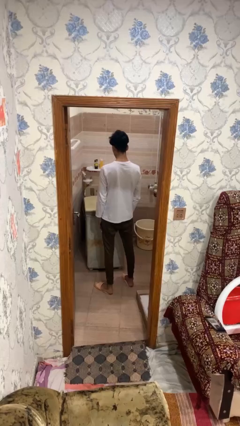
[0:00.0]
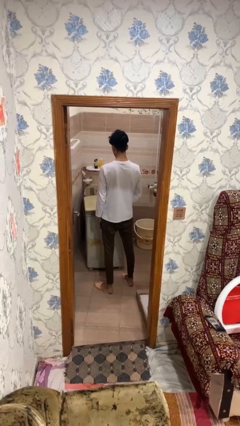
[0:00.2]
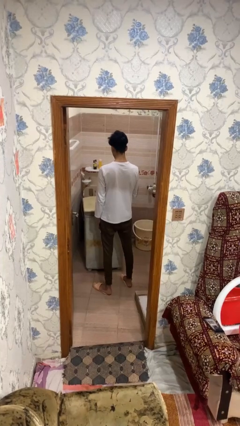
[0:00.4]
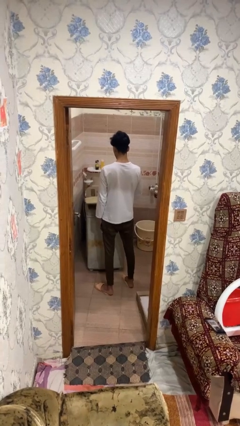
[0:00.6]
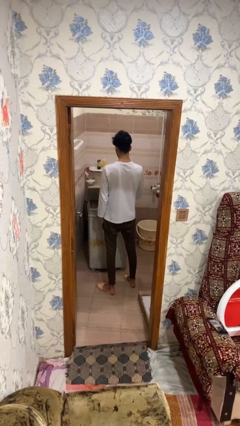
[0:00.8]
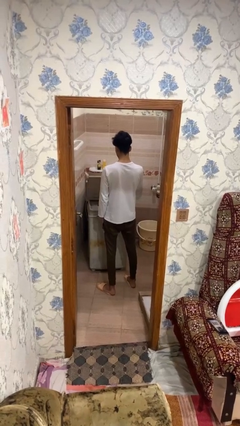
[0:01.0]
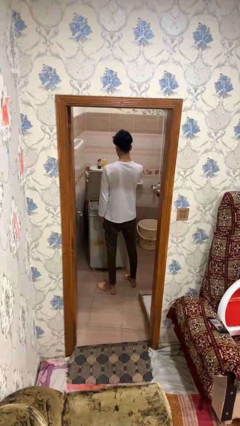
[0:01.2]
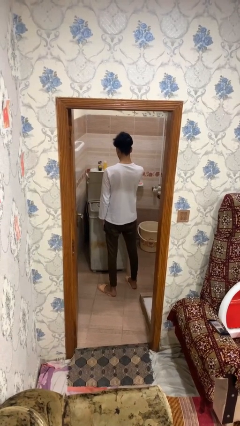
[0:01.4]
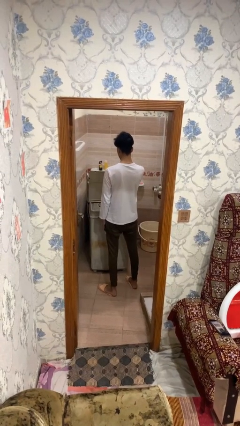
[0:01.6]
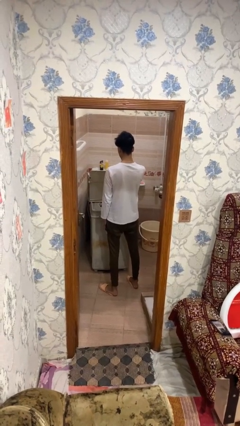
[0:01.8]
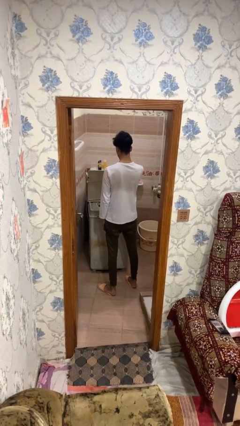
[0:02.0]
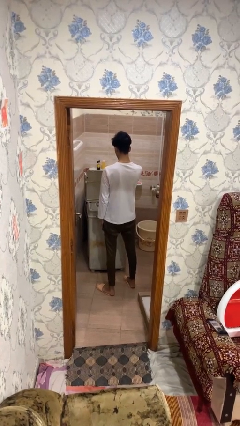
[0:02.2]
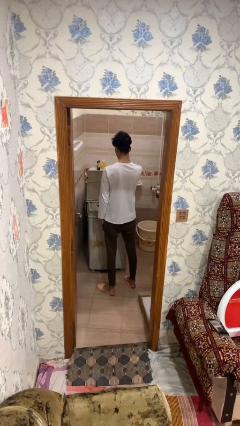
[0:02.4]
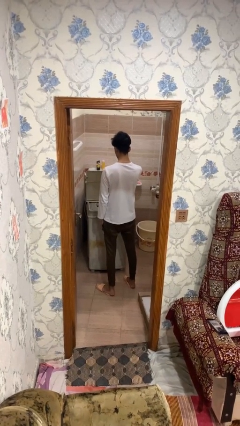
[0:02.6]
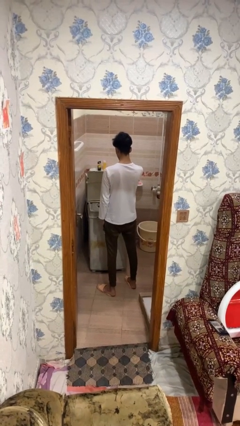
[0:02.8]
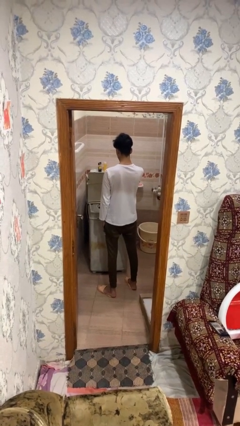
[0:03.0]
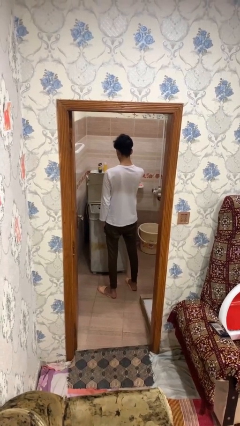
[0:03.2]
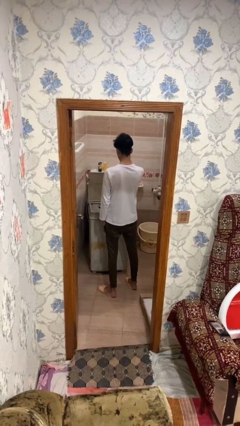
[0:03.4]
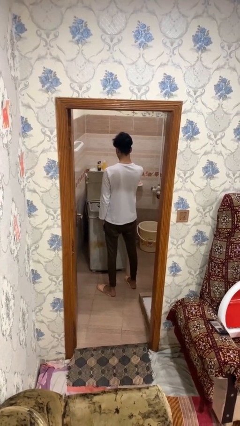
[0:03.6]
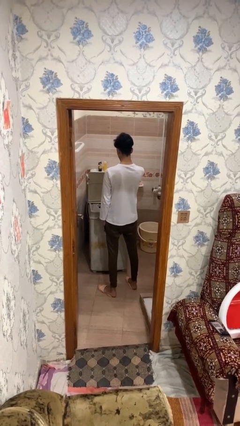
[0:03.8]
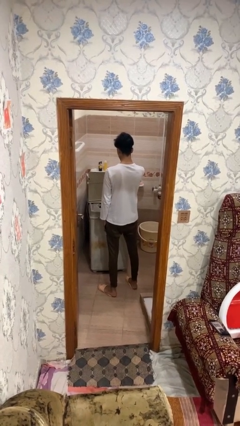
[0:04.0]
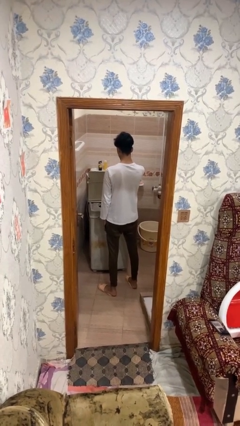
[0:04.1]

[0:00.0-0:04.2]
person opens clothes washer

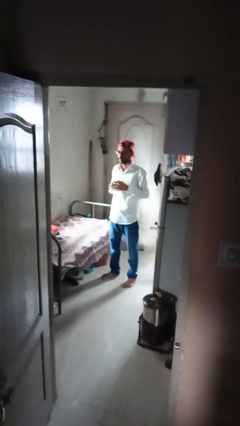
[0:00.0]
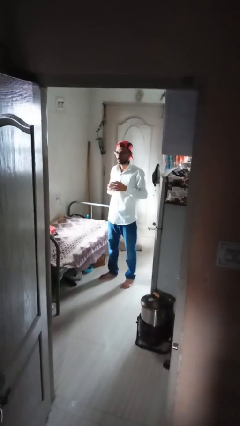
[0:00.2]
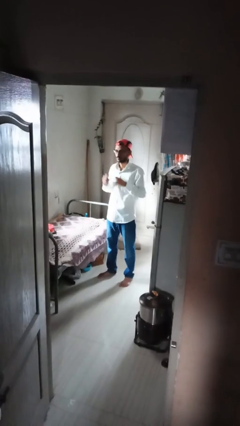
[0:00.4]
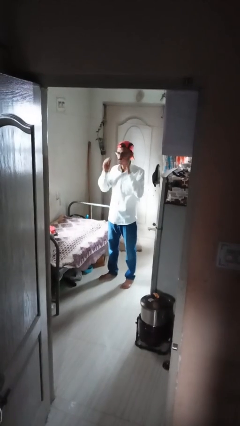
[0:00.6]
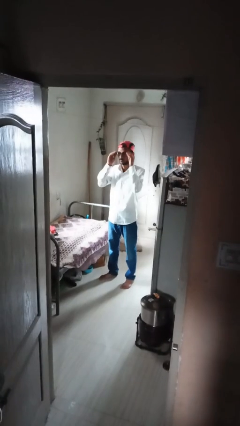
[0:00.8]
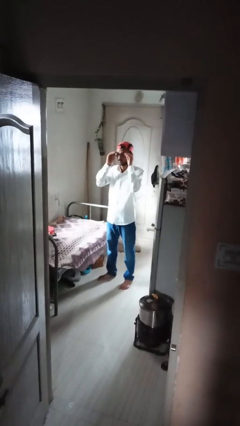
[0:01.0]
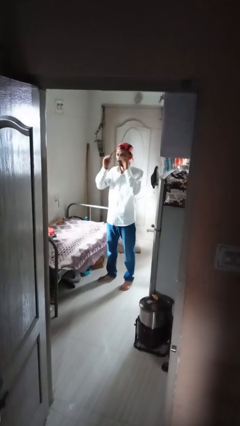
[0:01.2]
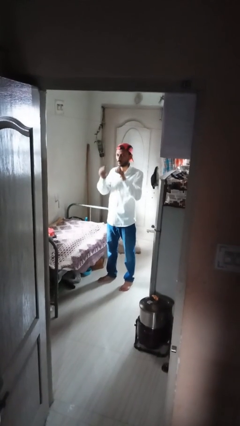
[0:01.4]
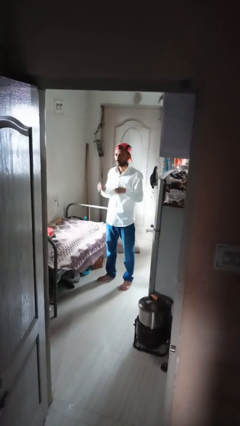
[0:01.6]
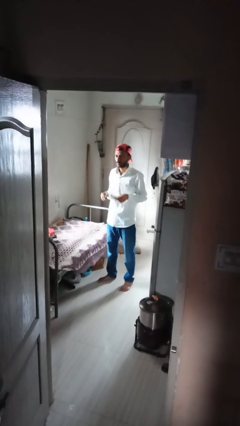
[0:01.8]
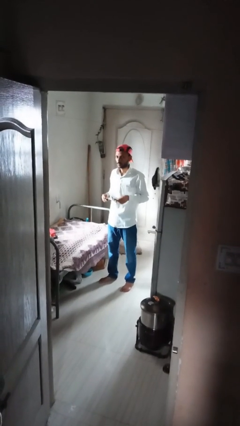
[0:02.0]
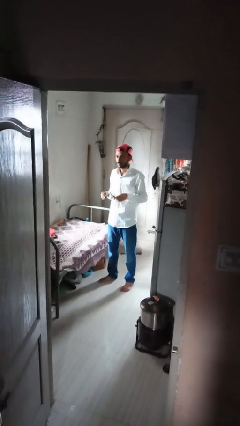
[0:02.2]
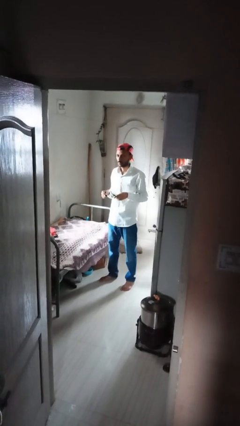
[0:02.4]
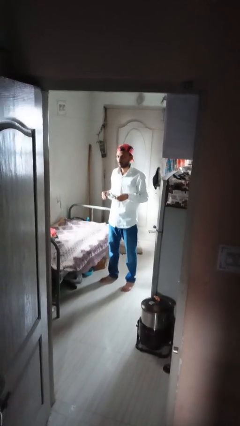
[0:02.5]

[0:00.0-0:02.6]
person takes off glasses

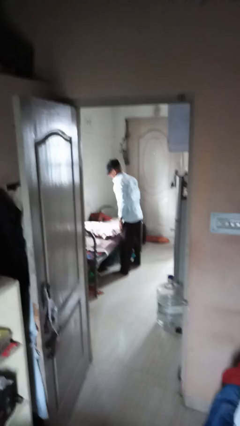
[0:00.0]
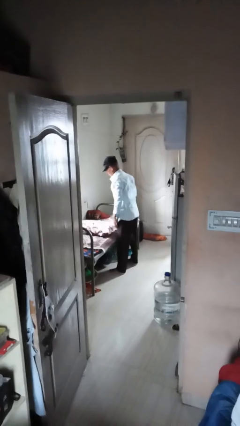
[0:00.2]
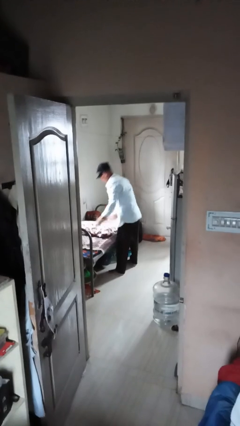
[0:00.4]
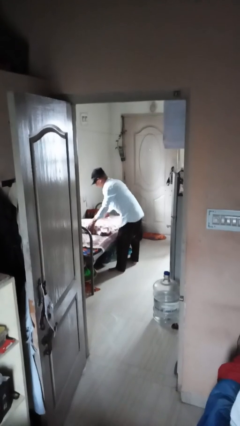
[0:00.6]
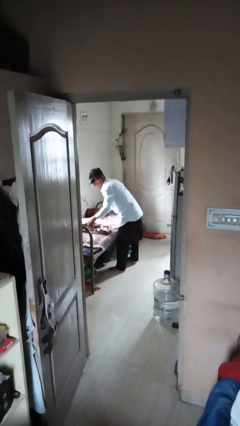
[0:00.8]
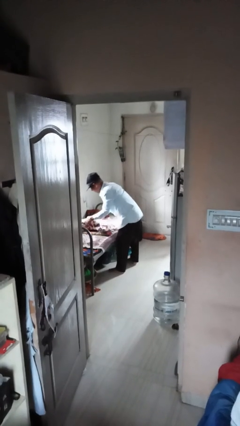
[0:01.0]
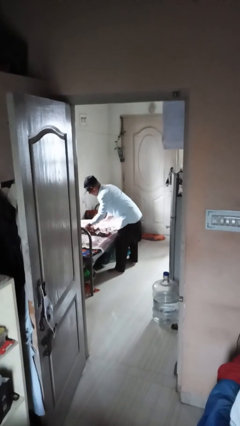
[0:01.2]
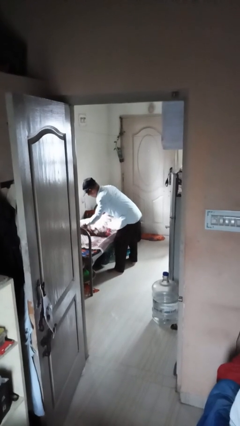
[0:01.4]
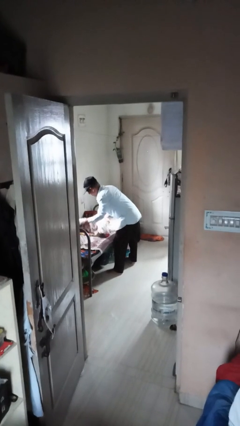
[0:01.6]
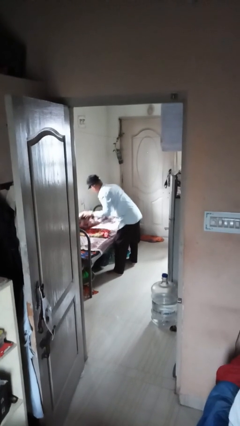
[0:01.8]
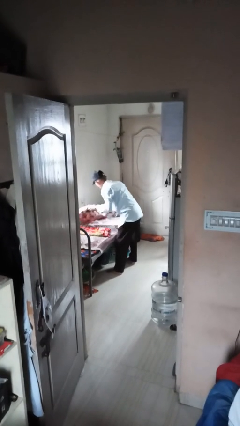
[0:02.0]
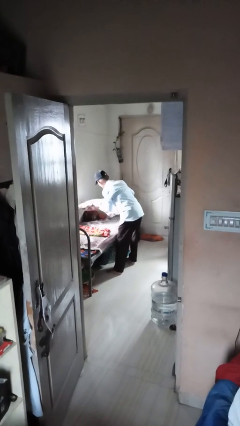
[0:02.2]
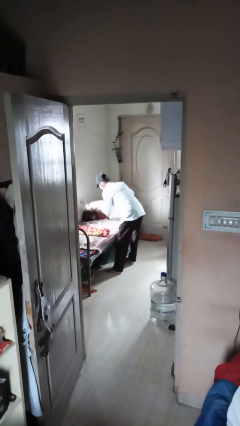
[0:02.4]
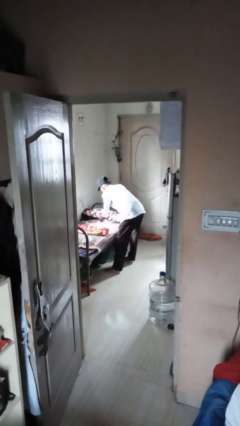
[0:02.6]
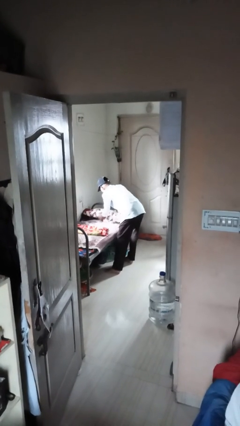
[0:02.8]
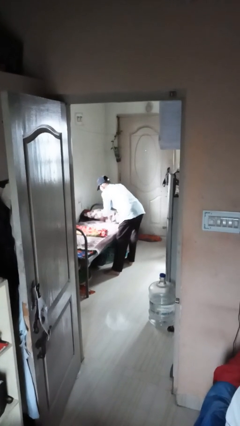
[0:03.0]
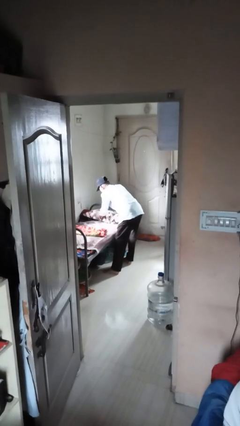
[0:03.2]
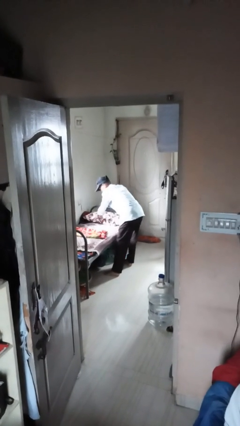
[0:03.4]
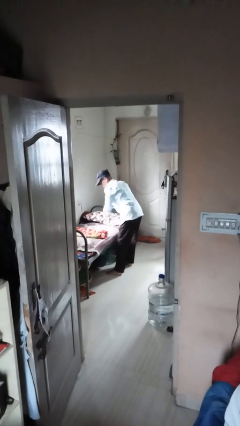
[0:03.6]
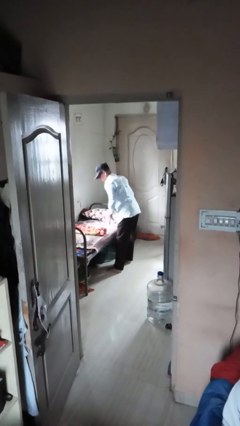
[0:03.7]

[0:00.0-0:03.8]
person makes bed

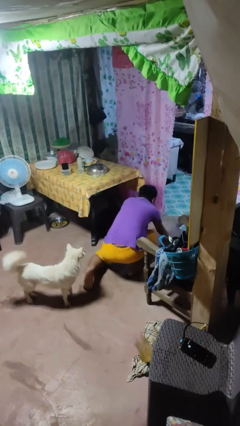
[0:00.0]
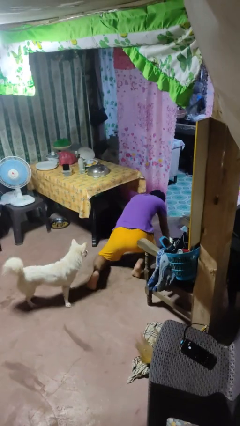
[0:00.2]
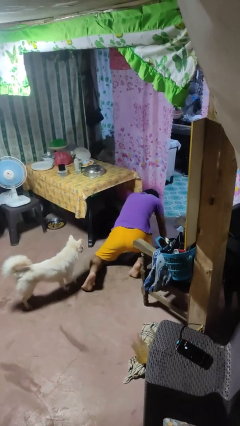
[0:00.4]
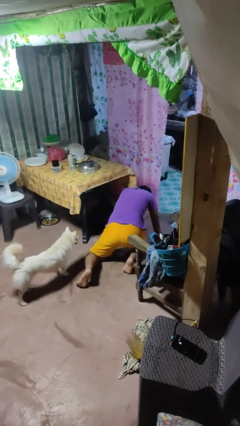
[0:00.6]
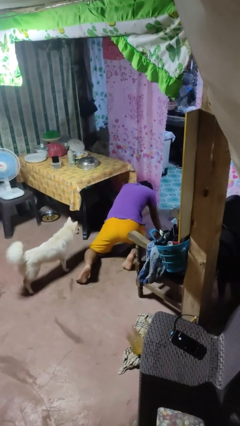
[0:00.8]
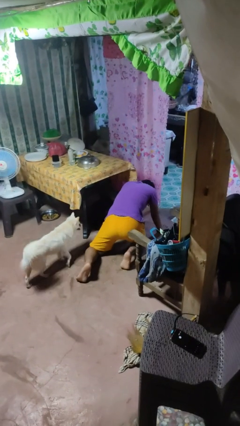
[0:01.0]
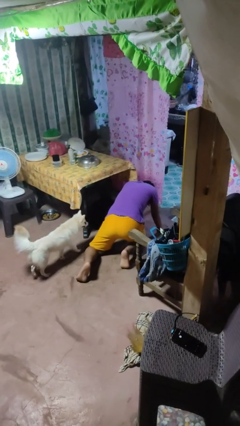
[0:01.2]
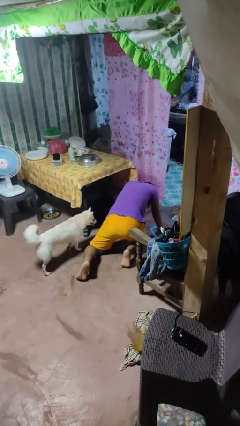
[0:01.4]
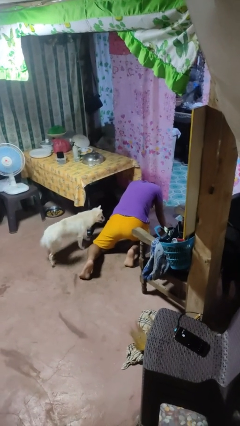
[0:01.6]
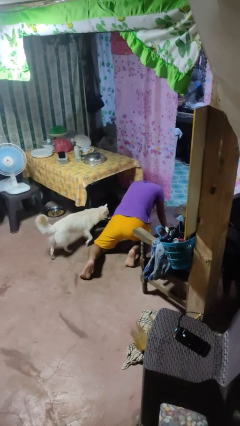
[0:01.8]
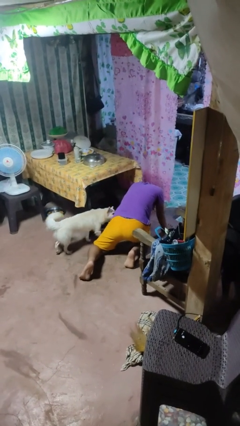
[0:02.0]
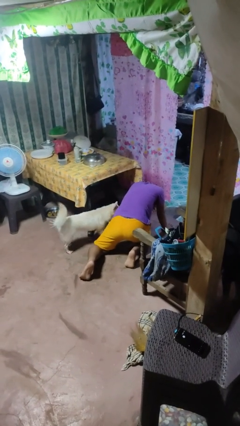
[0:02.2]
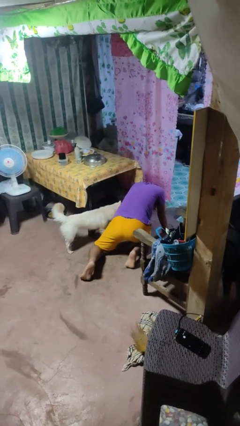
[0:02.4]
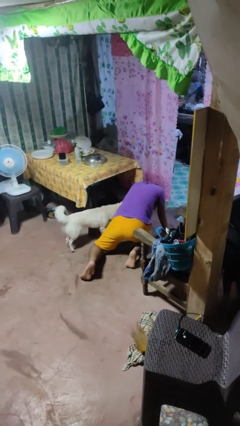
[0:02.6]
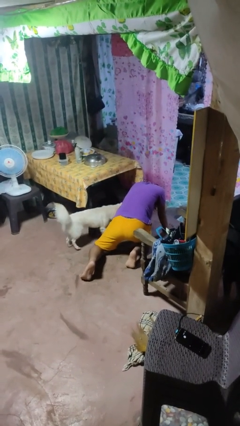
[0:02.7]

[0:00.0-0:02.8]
person lies down on floor

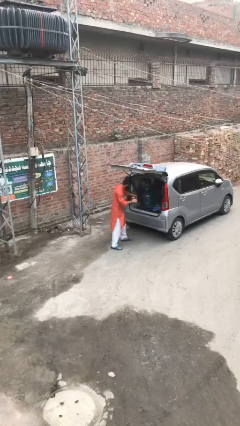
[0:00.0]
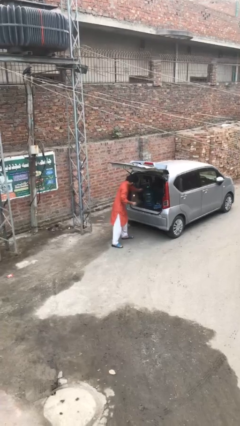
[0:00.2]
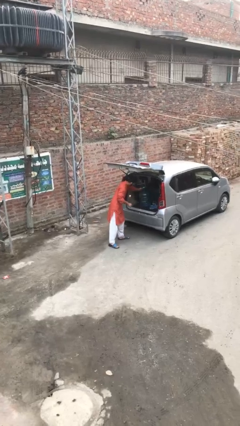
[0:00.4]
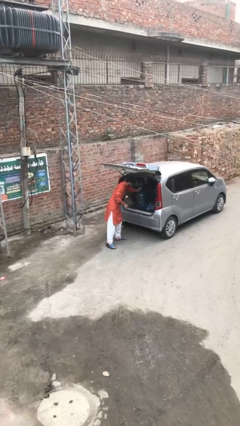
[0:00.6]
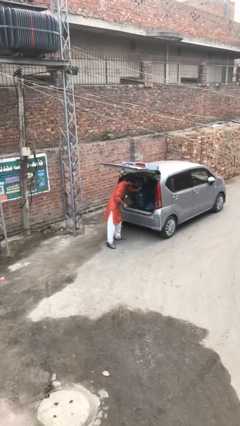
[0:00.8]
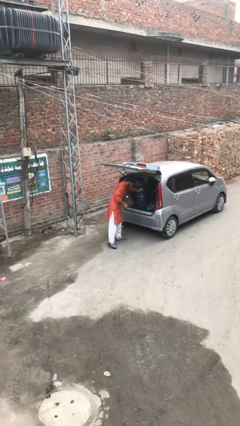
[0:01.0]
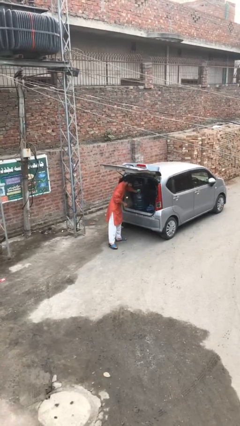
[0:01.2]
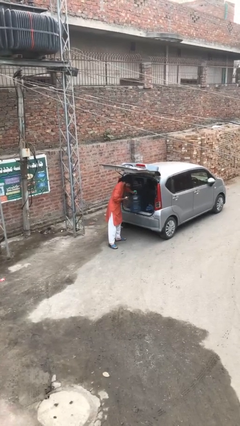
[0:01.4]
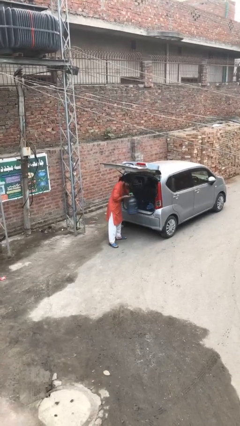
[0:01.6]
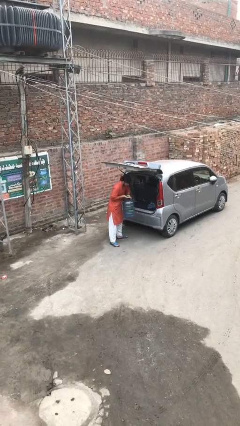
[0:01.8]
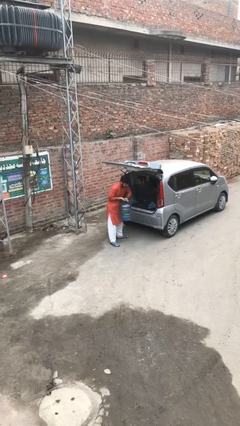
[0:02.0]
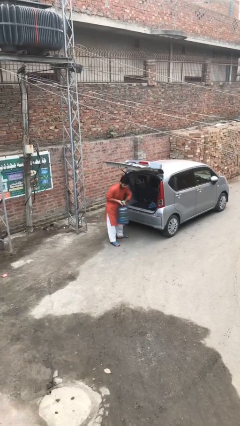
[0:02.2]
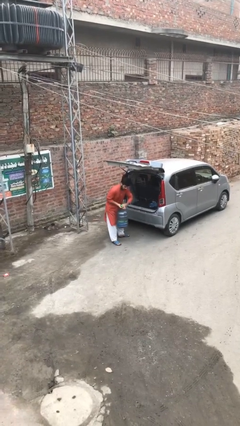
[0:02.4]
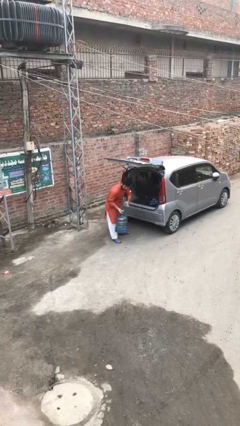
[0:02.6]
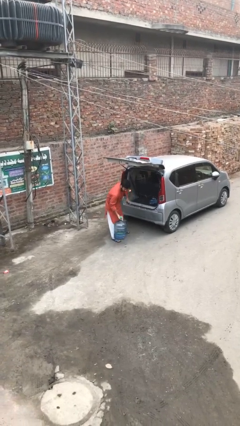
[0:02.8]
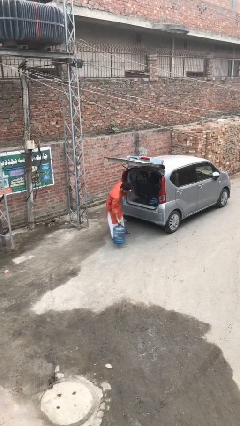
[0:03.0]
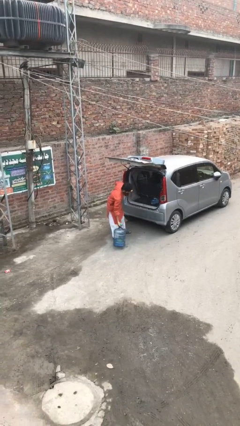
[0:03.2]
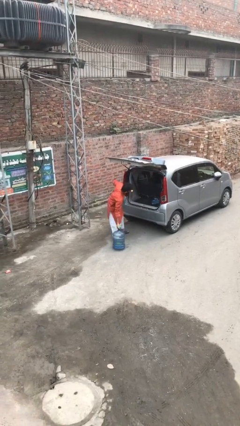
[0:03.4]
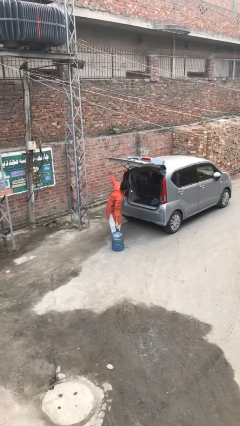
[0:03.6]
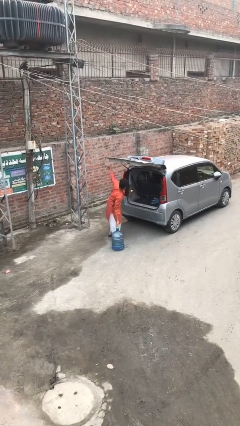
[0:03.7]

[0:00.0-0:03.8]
person unloads car

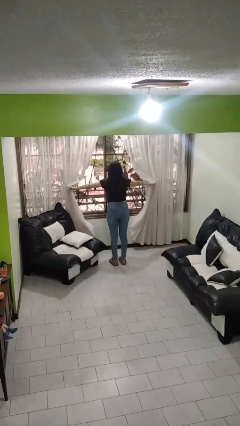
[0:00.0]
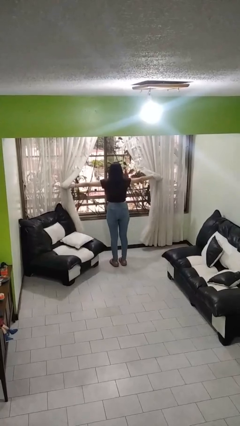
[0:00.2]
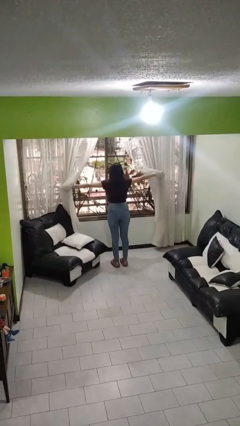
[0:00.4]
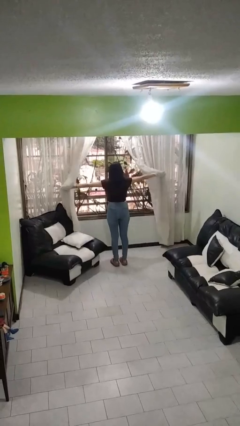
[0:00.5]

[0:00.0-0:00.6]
person opens curtains
